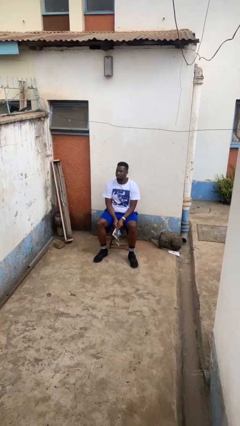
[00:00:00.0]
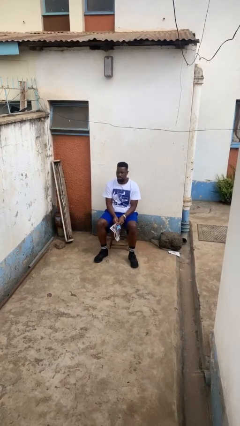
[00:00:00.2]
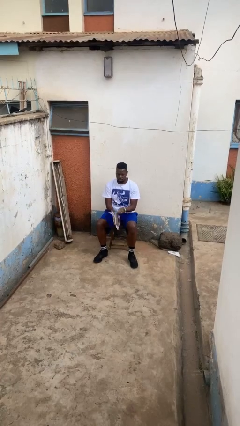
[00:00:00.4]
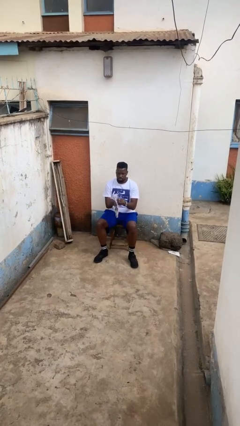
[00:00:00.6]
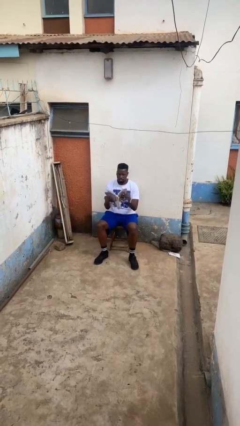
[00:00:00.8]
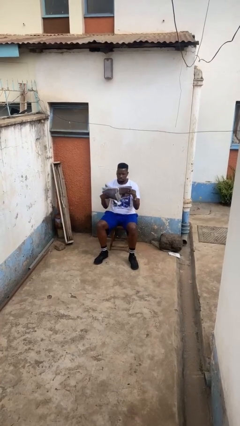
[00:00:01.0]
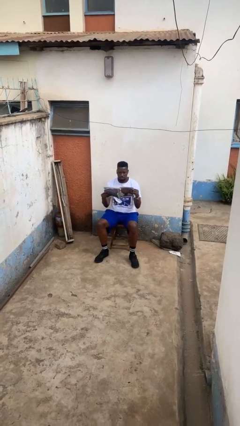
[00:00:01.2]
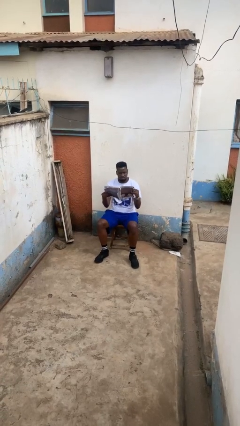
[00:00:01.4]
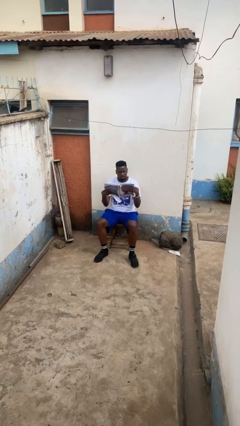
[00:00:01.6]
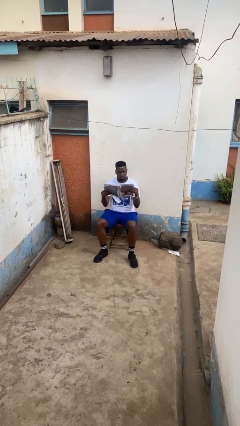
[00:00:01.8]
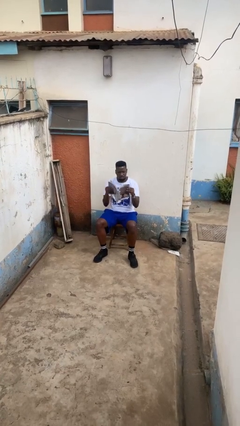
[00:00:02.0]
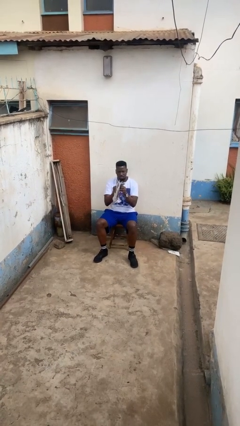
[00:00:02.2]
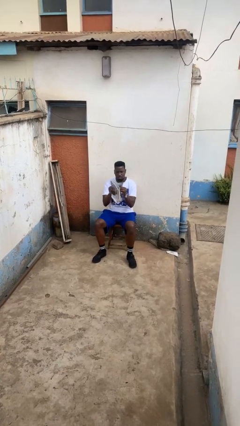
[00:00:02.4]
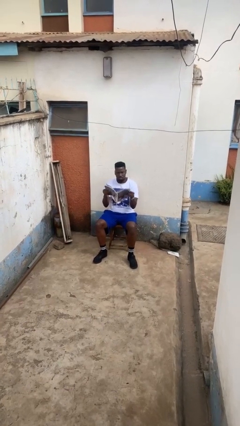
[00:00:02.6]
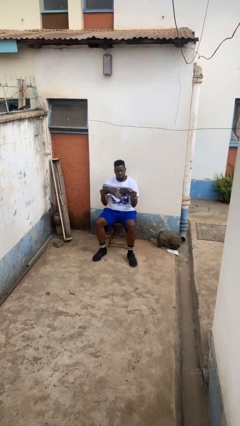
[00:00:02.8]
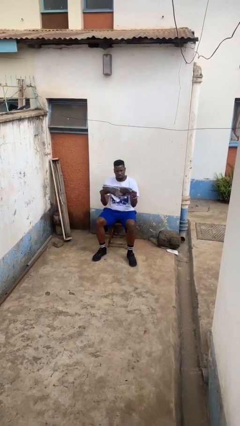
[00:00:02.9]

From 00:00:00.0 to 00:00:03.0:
person reads magazine

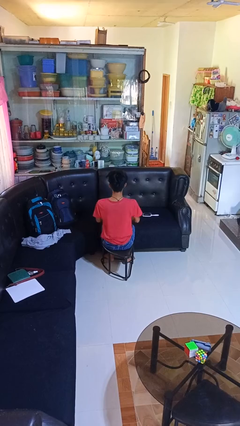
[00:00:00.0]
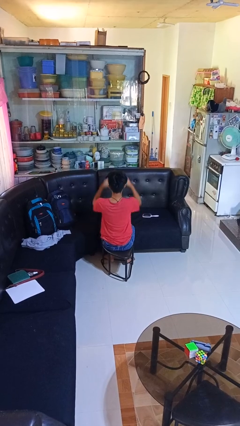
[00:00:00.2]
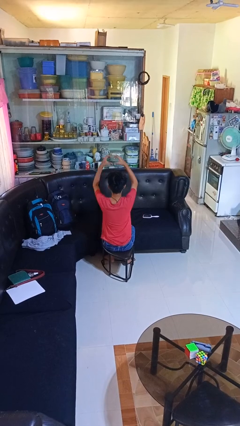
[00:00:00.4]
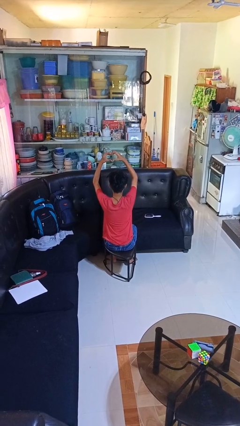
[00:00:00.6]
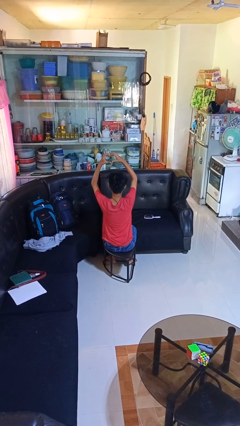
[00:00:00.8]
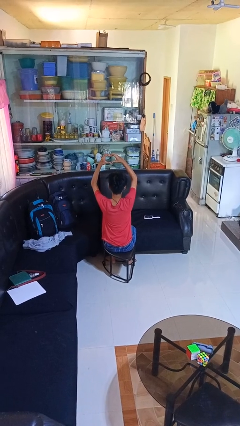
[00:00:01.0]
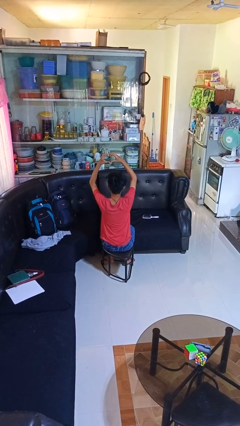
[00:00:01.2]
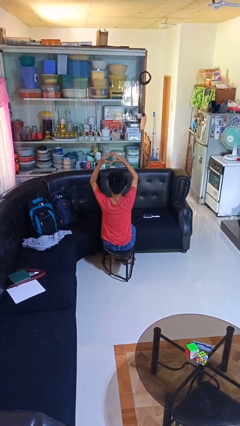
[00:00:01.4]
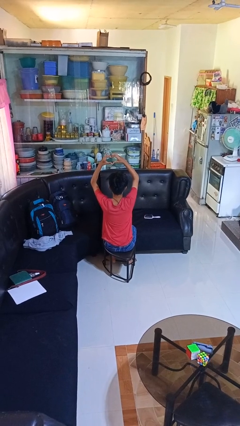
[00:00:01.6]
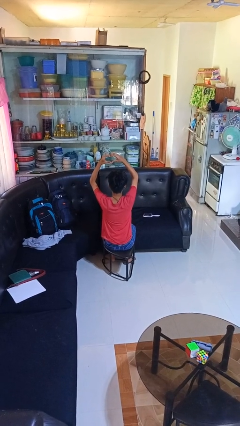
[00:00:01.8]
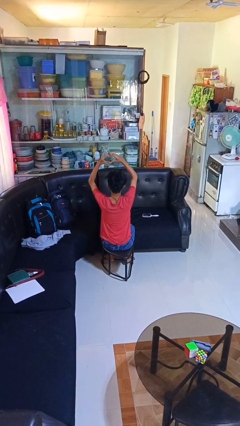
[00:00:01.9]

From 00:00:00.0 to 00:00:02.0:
person gestures heart

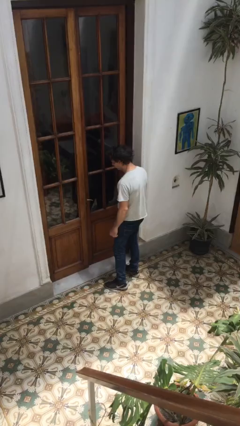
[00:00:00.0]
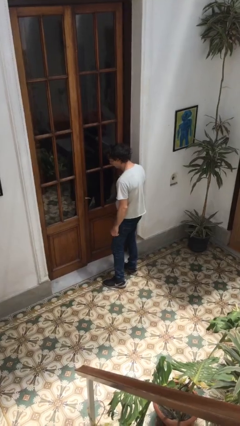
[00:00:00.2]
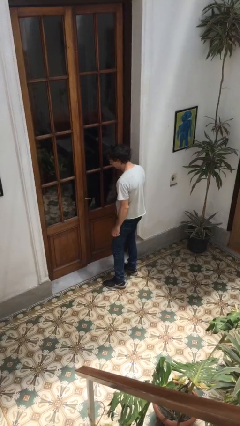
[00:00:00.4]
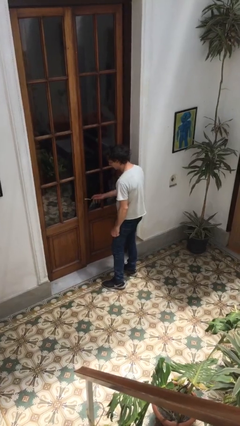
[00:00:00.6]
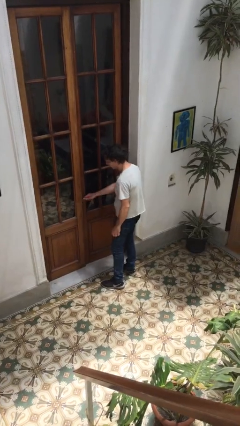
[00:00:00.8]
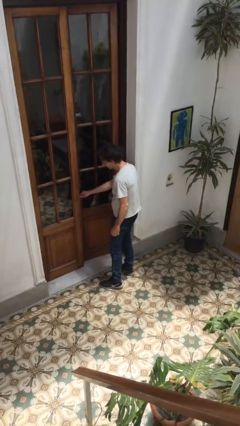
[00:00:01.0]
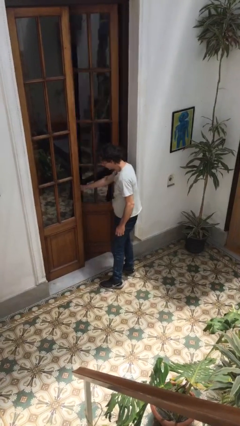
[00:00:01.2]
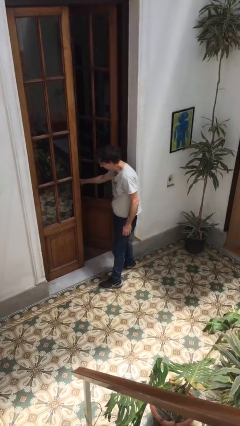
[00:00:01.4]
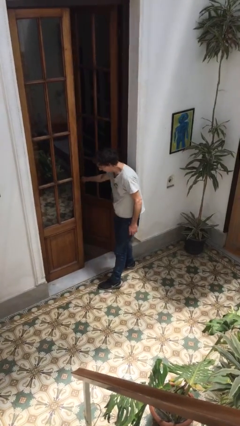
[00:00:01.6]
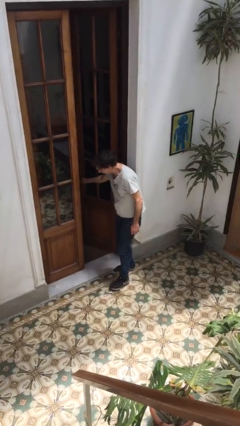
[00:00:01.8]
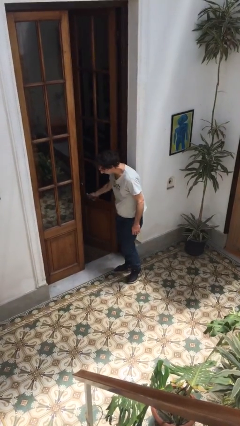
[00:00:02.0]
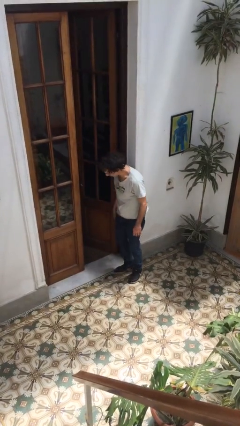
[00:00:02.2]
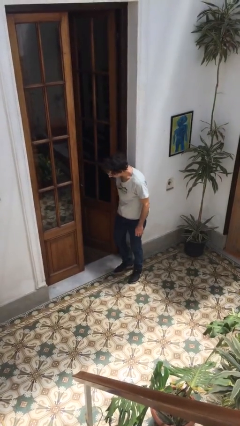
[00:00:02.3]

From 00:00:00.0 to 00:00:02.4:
person opens facility door

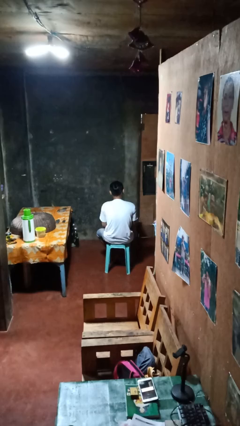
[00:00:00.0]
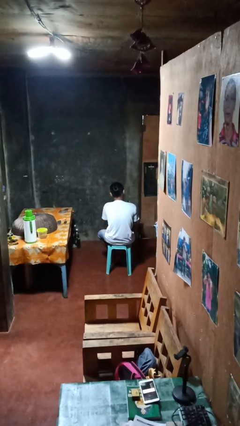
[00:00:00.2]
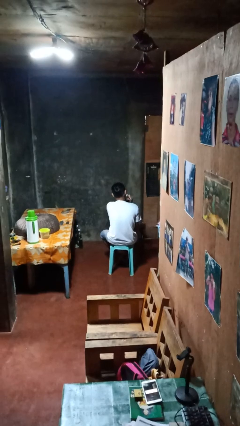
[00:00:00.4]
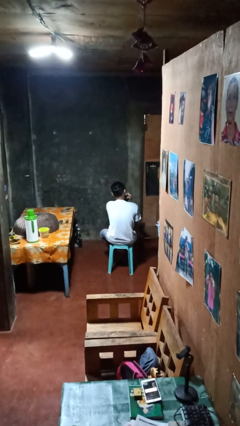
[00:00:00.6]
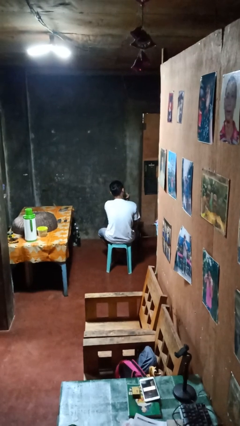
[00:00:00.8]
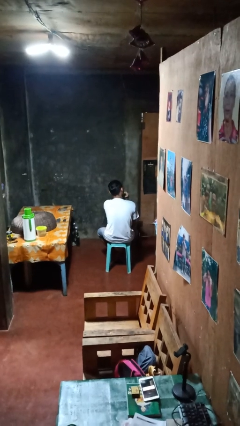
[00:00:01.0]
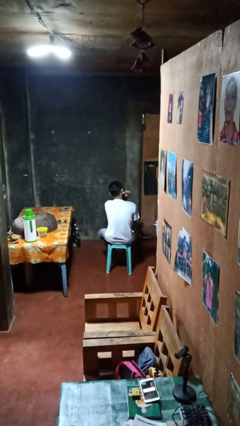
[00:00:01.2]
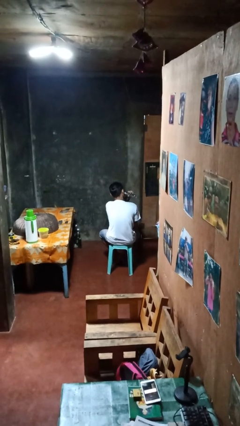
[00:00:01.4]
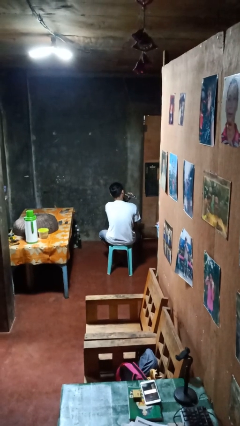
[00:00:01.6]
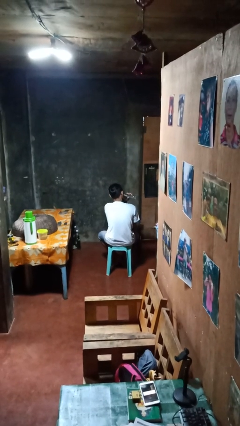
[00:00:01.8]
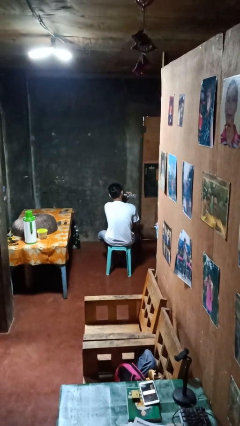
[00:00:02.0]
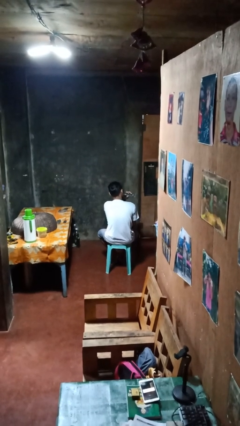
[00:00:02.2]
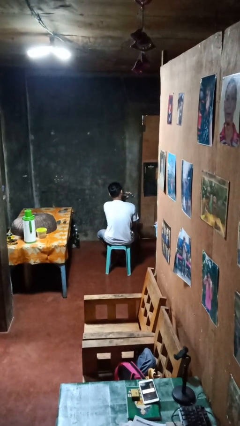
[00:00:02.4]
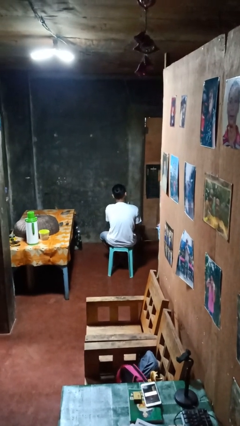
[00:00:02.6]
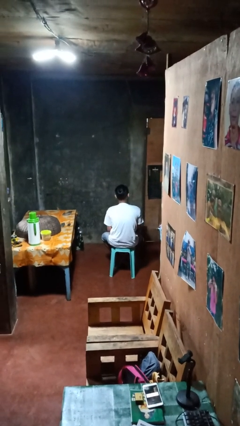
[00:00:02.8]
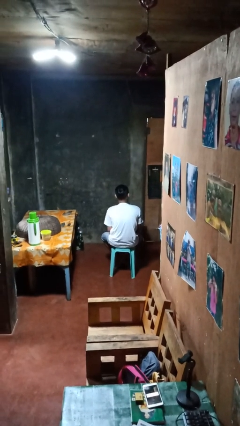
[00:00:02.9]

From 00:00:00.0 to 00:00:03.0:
person shaves face

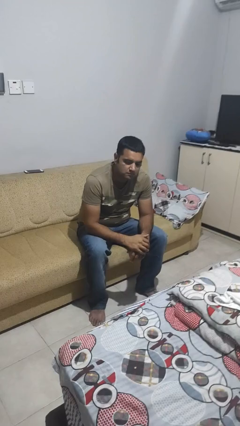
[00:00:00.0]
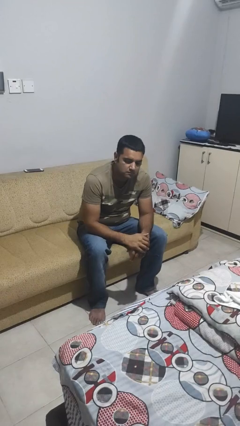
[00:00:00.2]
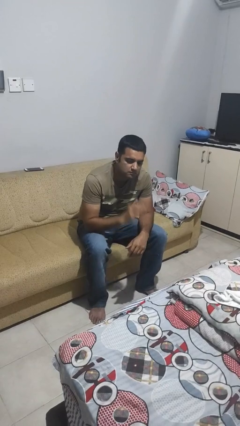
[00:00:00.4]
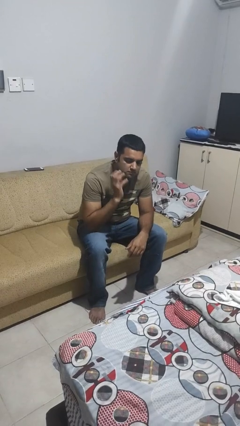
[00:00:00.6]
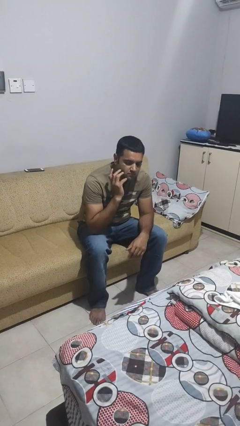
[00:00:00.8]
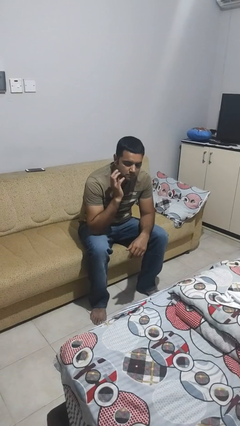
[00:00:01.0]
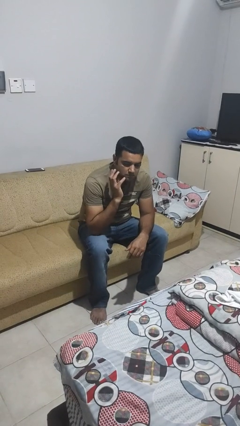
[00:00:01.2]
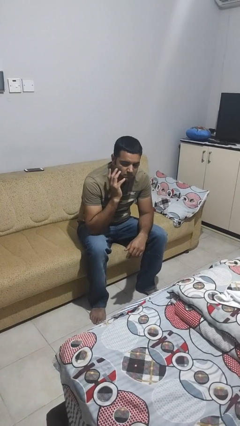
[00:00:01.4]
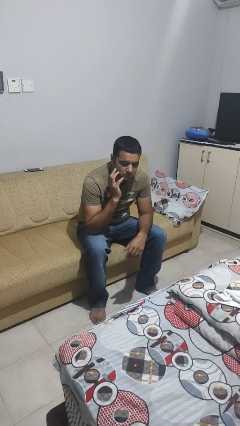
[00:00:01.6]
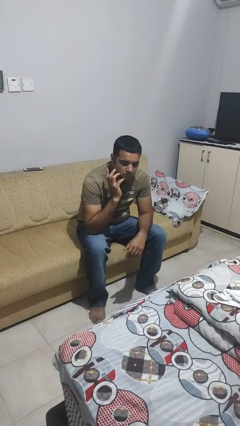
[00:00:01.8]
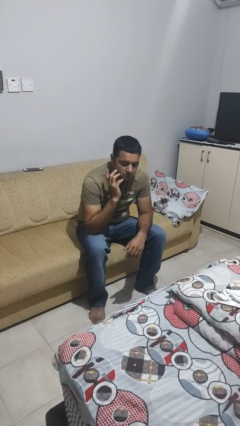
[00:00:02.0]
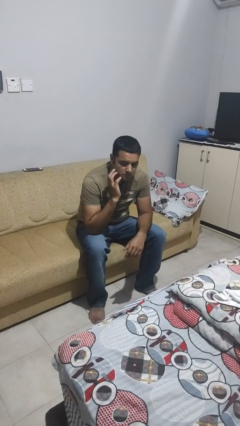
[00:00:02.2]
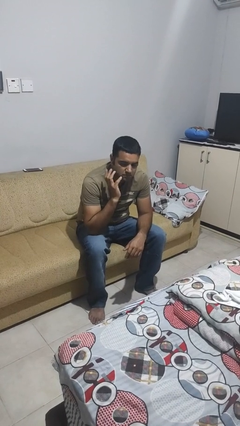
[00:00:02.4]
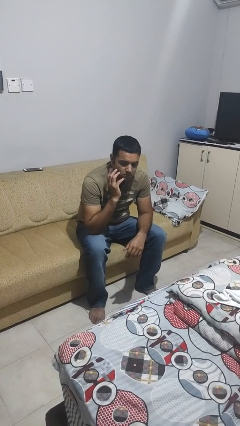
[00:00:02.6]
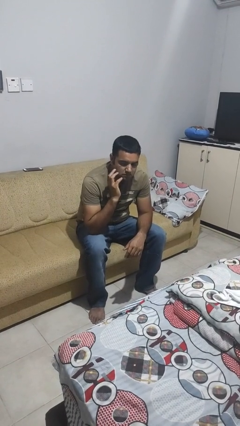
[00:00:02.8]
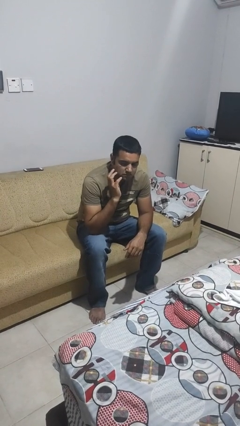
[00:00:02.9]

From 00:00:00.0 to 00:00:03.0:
person strokes chin

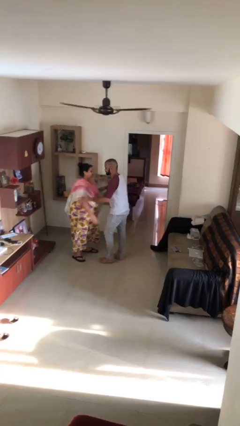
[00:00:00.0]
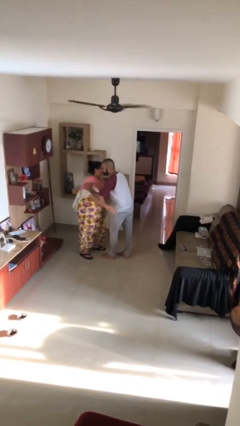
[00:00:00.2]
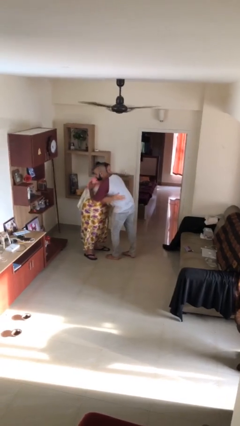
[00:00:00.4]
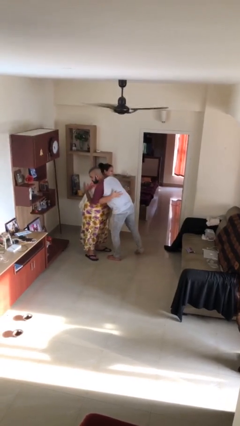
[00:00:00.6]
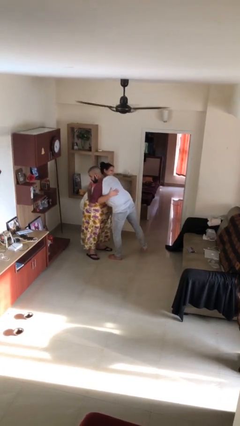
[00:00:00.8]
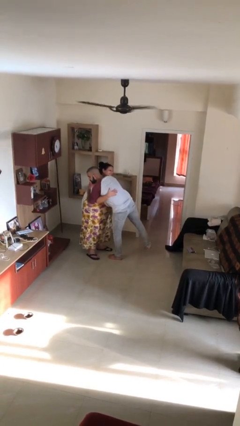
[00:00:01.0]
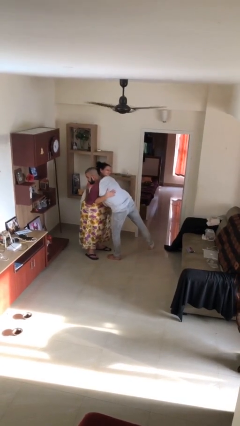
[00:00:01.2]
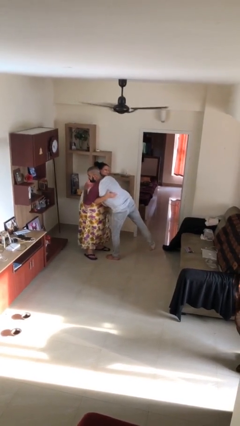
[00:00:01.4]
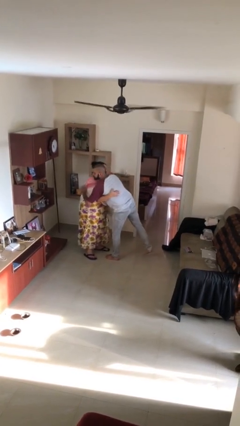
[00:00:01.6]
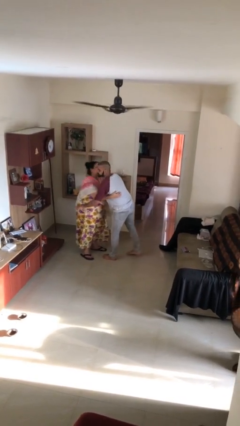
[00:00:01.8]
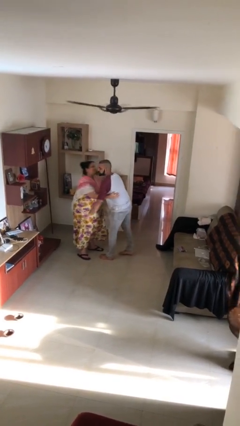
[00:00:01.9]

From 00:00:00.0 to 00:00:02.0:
person embraces person

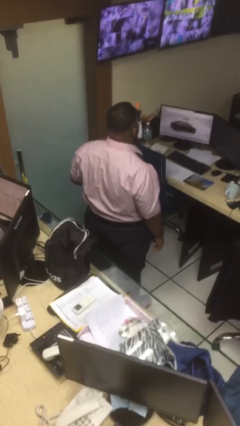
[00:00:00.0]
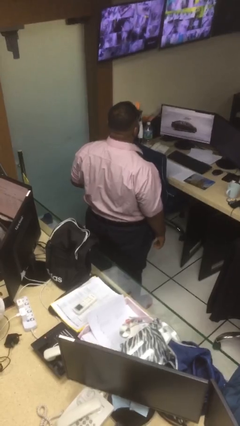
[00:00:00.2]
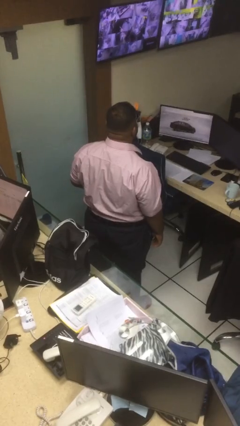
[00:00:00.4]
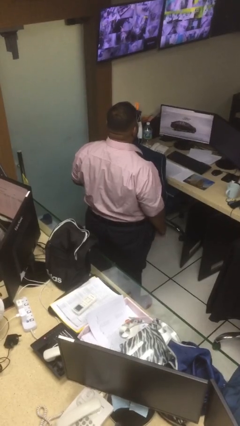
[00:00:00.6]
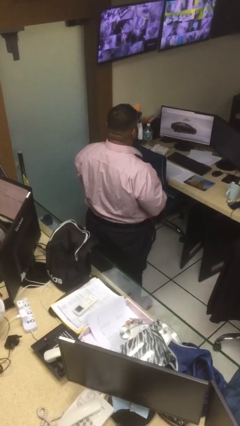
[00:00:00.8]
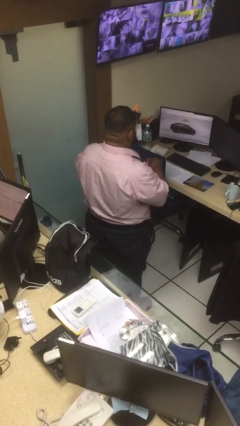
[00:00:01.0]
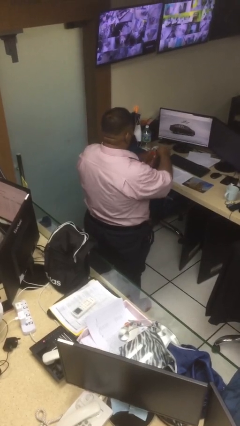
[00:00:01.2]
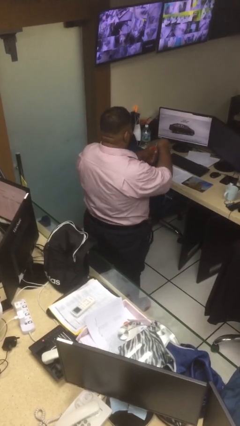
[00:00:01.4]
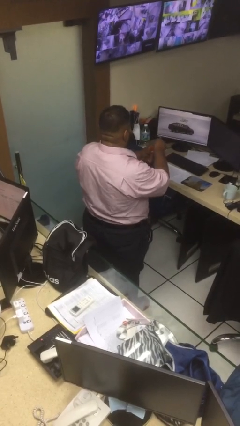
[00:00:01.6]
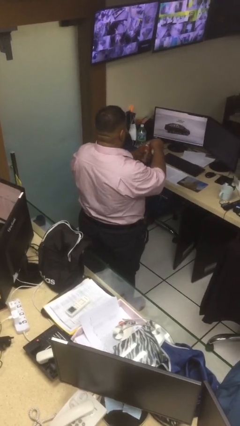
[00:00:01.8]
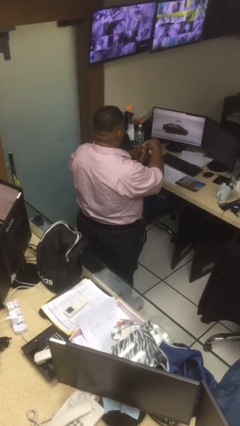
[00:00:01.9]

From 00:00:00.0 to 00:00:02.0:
person opens beverage can
